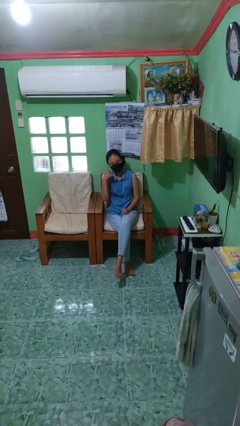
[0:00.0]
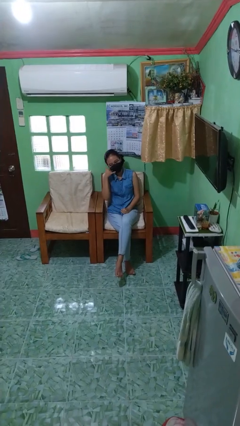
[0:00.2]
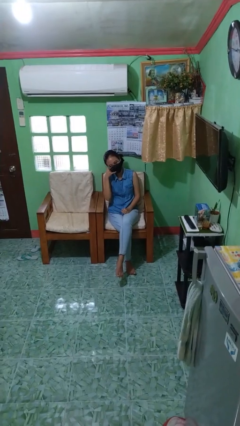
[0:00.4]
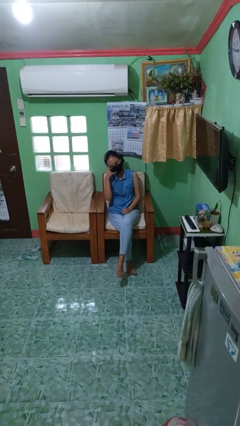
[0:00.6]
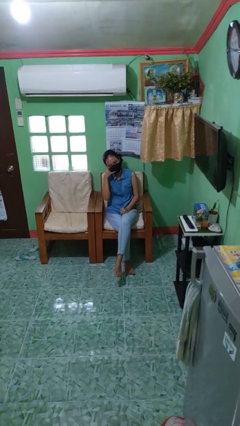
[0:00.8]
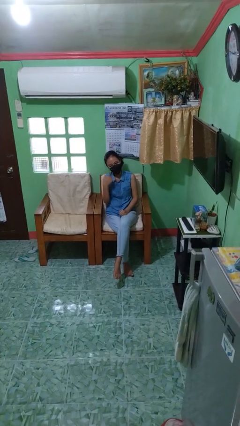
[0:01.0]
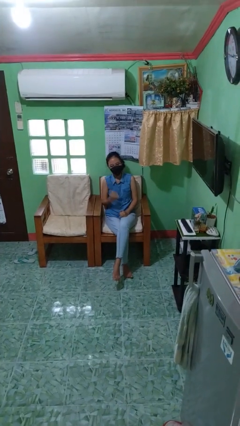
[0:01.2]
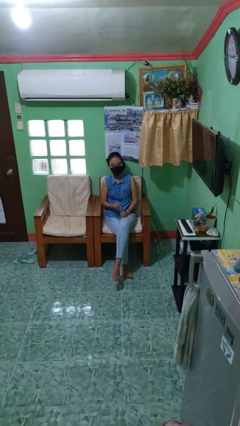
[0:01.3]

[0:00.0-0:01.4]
person gestures call me

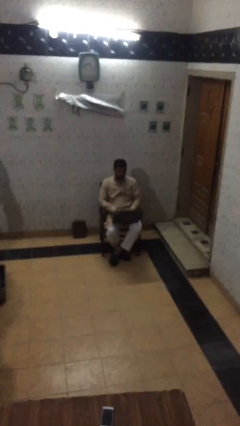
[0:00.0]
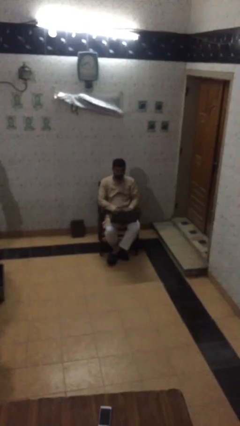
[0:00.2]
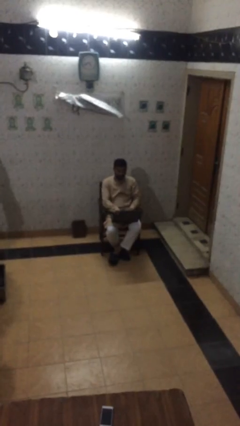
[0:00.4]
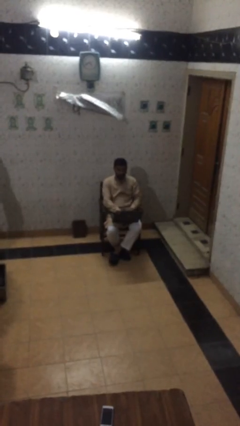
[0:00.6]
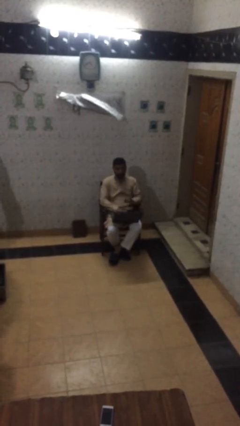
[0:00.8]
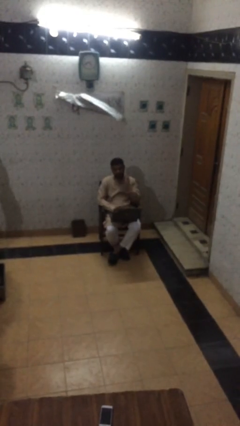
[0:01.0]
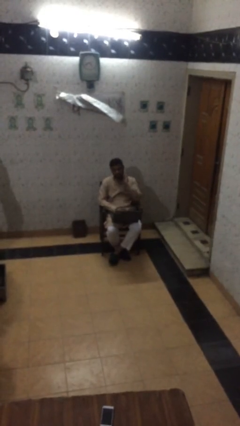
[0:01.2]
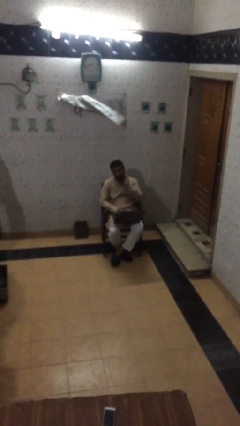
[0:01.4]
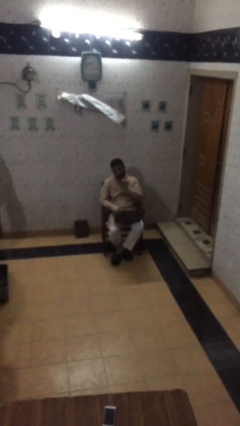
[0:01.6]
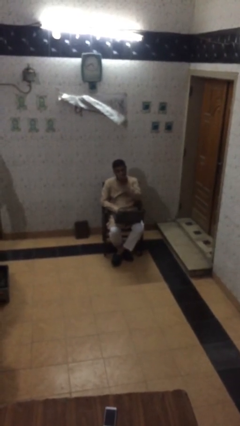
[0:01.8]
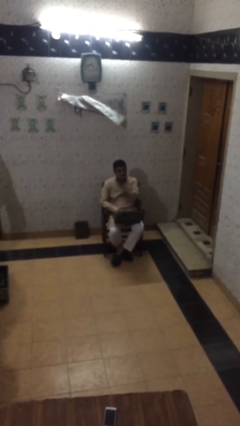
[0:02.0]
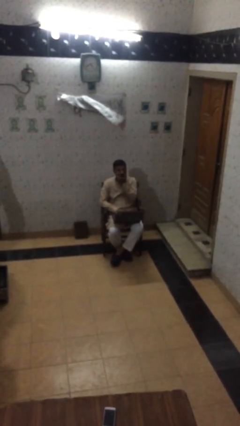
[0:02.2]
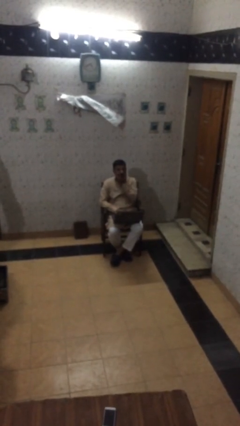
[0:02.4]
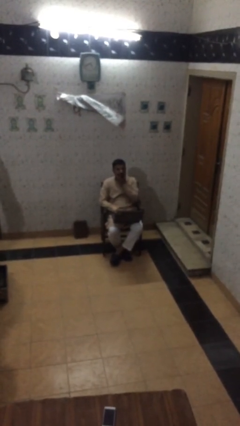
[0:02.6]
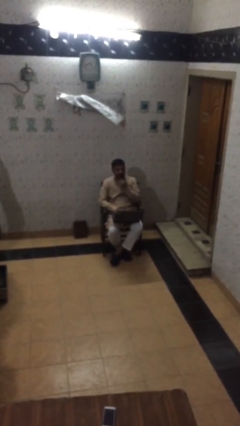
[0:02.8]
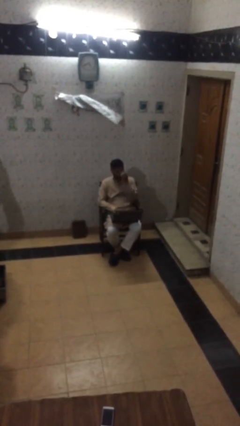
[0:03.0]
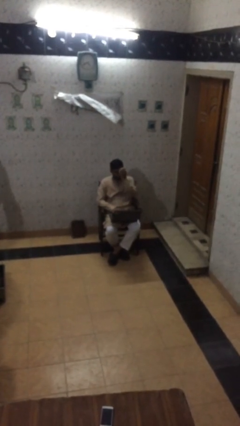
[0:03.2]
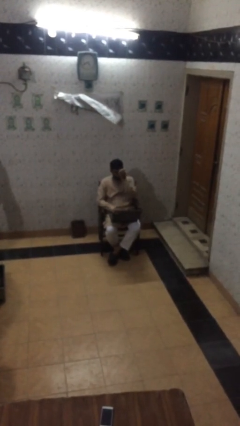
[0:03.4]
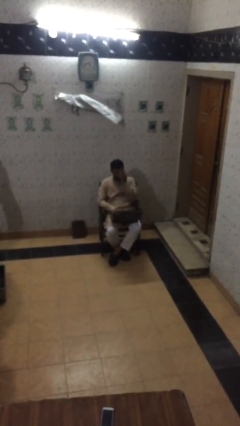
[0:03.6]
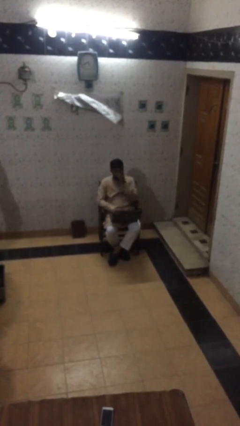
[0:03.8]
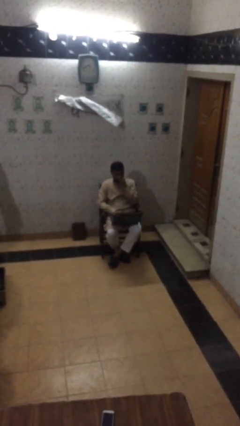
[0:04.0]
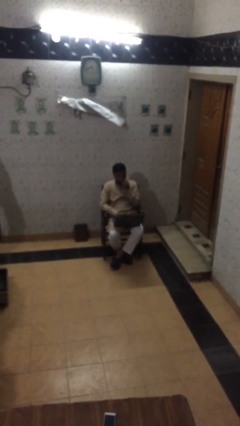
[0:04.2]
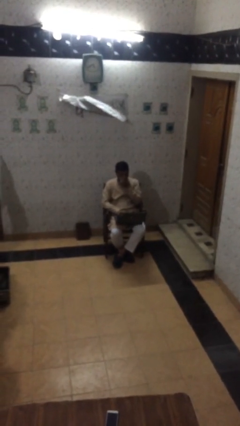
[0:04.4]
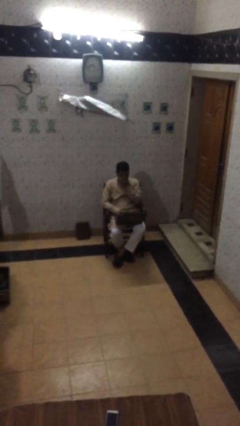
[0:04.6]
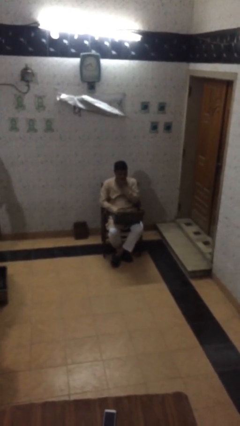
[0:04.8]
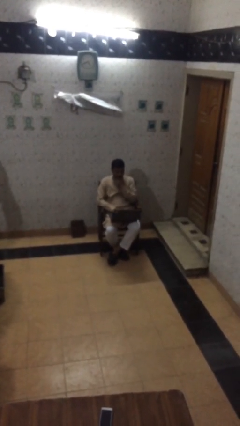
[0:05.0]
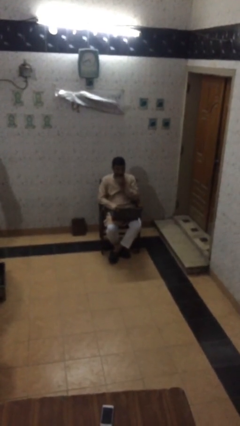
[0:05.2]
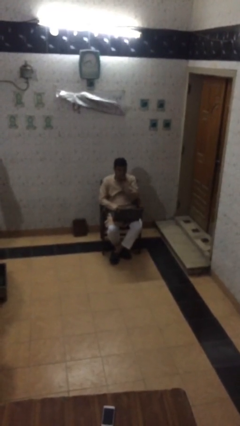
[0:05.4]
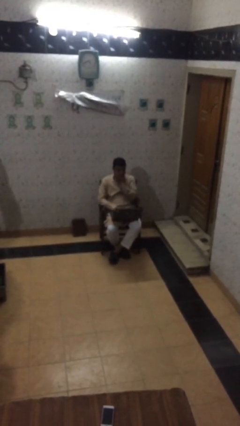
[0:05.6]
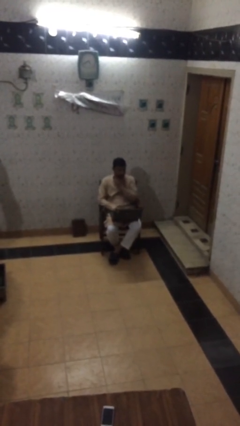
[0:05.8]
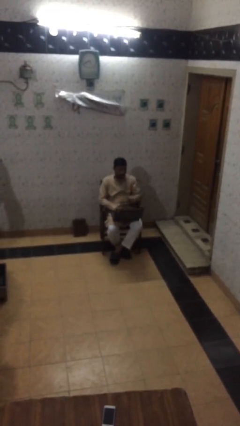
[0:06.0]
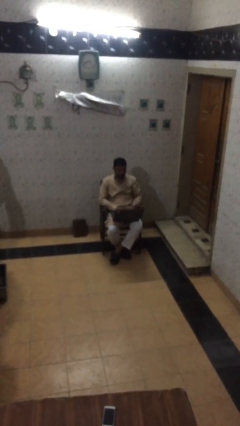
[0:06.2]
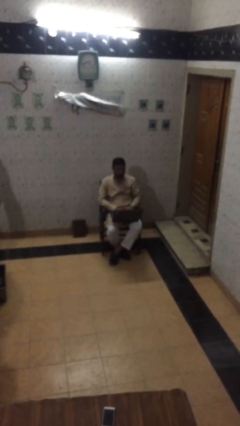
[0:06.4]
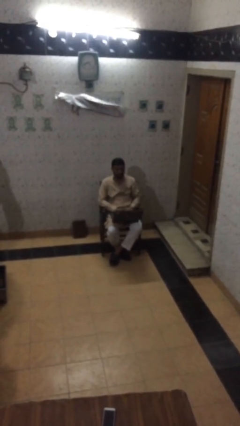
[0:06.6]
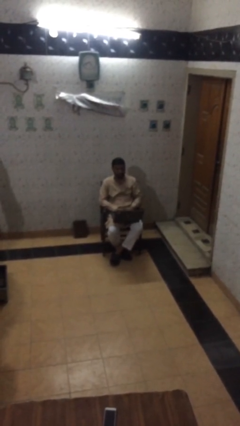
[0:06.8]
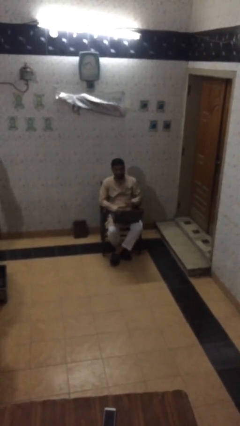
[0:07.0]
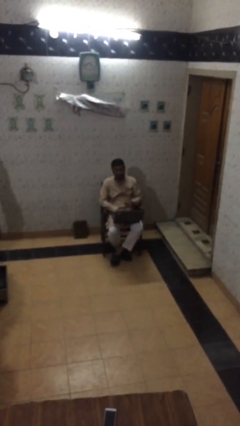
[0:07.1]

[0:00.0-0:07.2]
person interacts with laptop

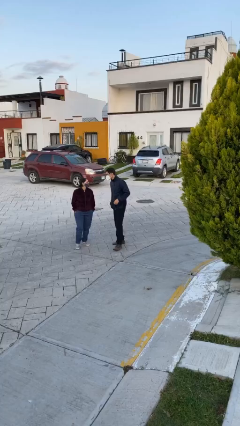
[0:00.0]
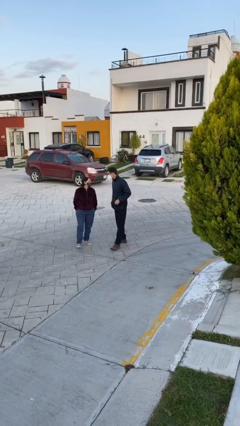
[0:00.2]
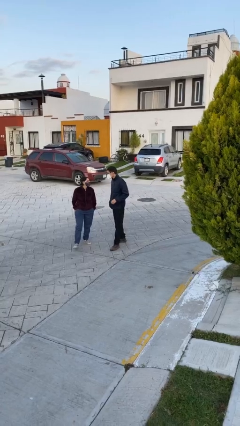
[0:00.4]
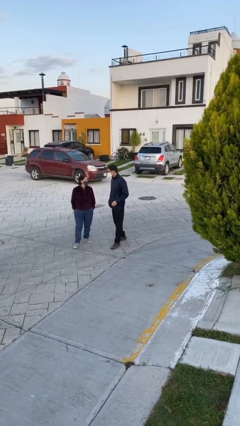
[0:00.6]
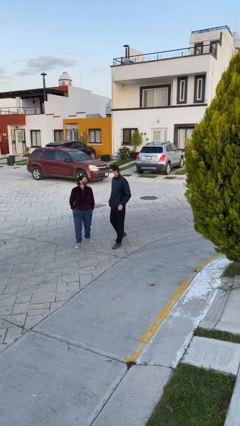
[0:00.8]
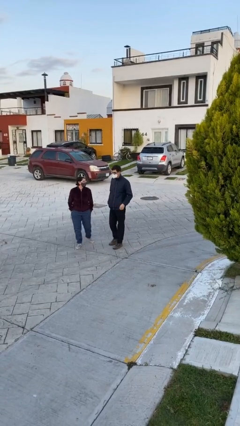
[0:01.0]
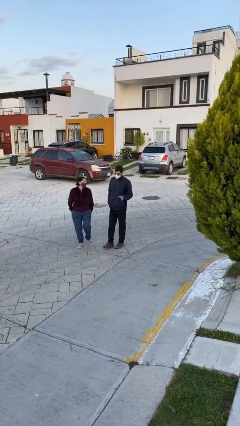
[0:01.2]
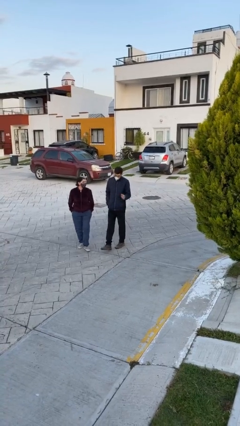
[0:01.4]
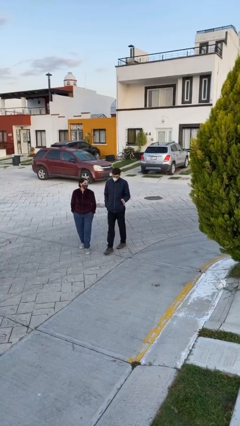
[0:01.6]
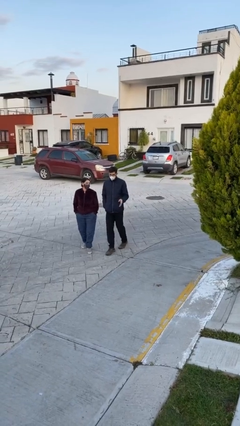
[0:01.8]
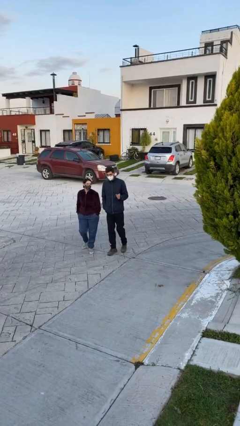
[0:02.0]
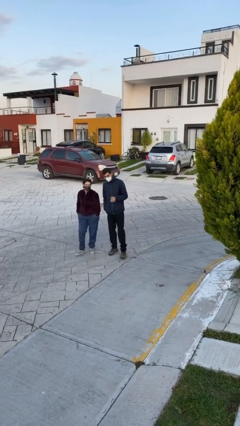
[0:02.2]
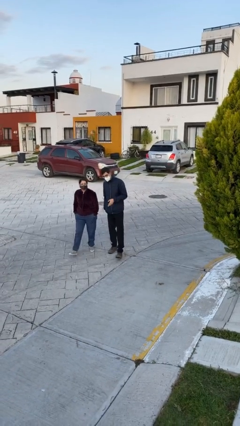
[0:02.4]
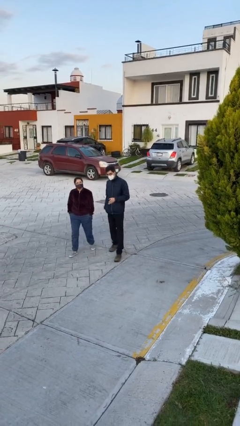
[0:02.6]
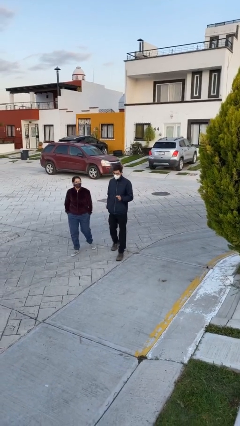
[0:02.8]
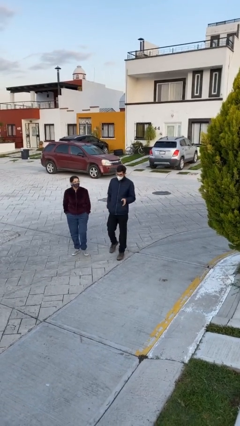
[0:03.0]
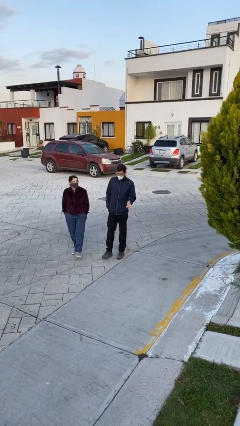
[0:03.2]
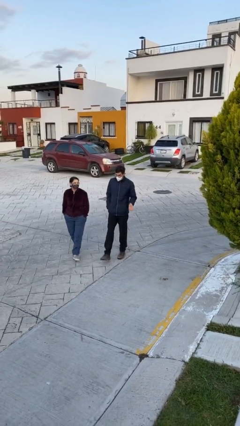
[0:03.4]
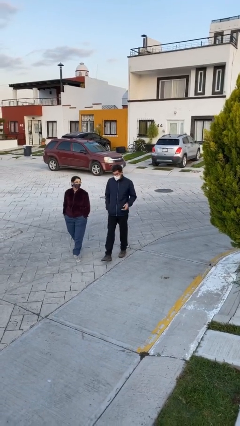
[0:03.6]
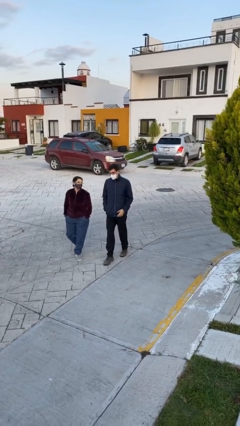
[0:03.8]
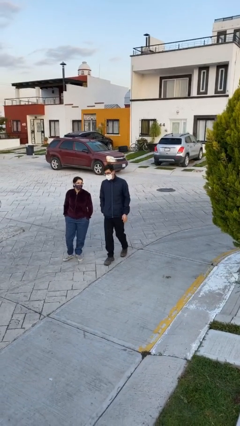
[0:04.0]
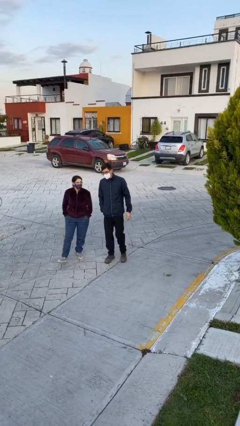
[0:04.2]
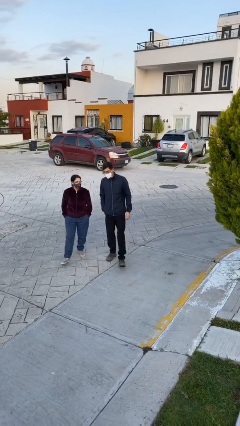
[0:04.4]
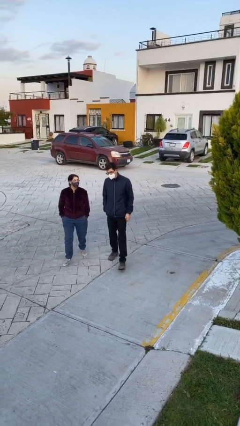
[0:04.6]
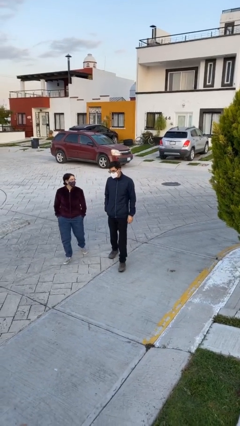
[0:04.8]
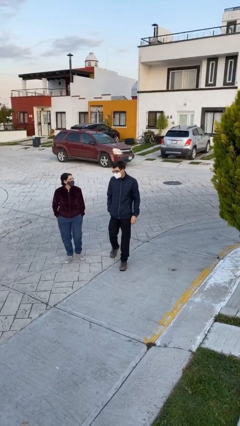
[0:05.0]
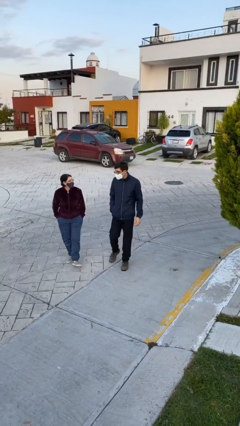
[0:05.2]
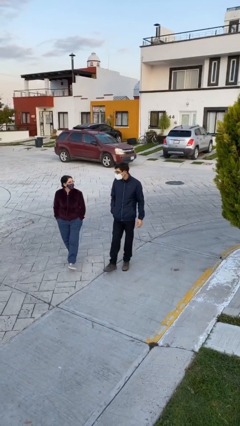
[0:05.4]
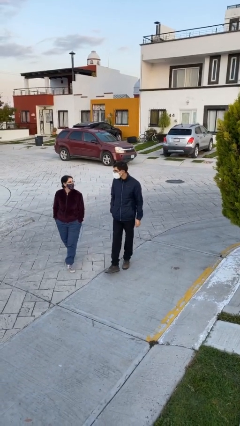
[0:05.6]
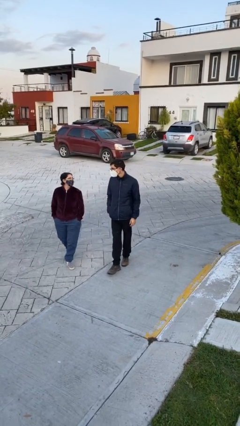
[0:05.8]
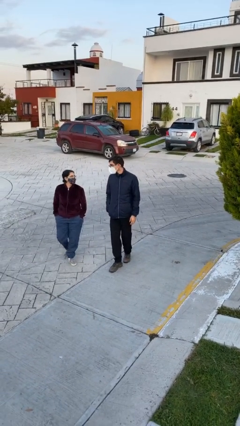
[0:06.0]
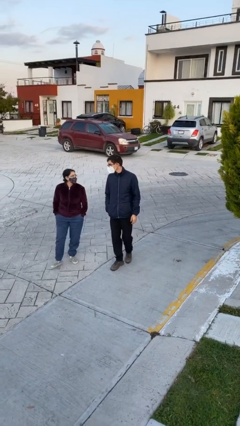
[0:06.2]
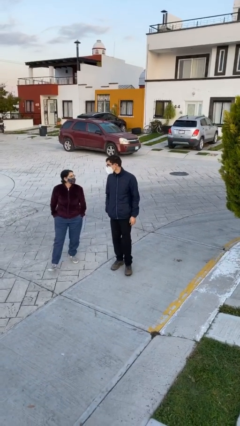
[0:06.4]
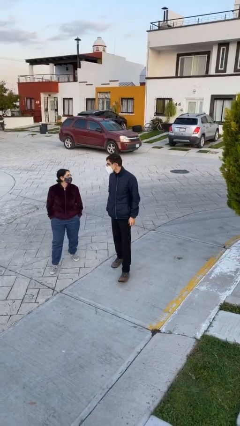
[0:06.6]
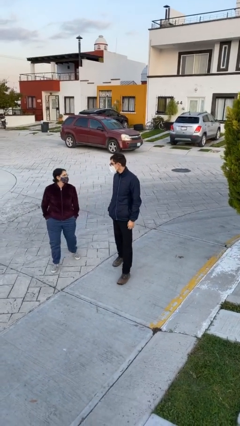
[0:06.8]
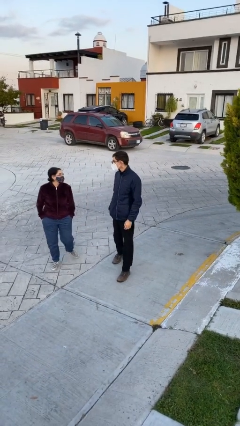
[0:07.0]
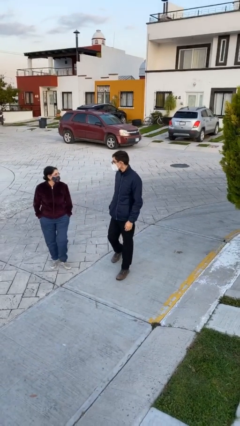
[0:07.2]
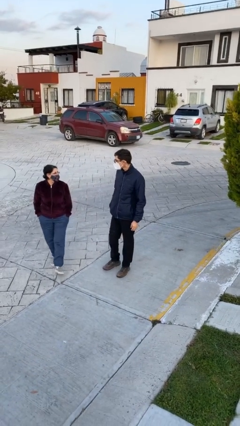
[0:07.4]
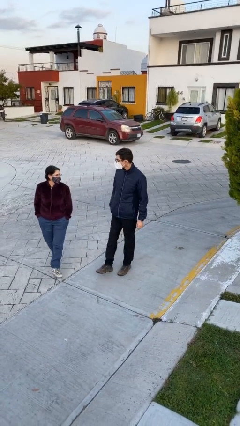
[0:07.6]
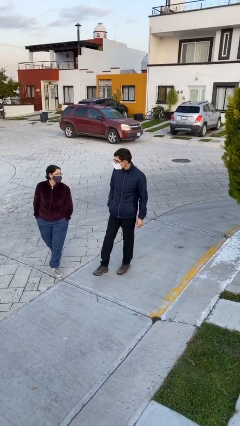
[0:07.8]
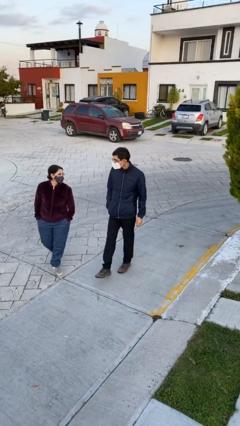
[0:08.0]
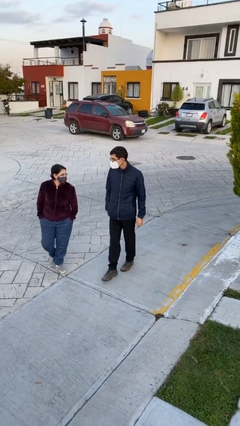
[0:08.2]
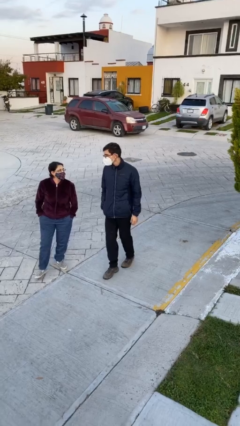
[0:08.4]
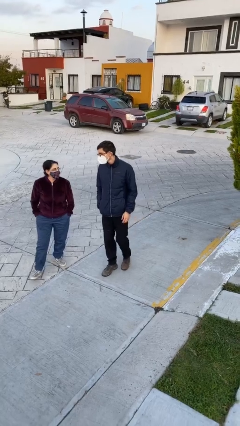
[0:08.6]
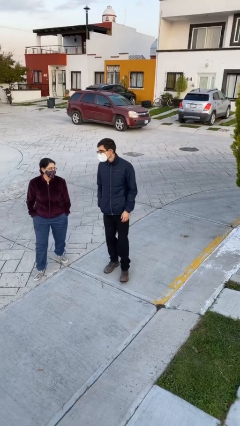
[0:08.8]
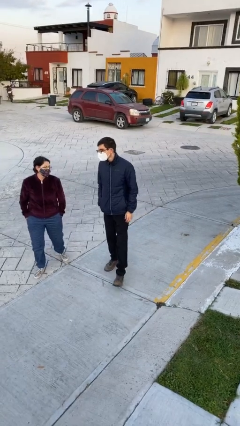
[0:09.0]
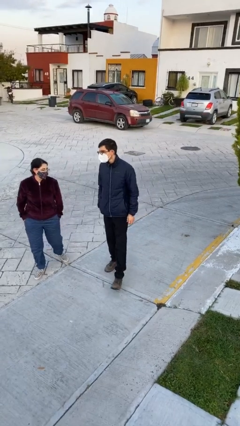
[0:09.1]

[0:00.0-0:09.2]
person talks to person

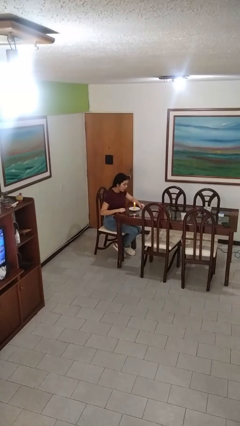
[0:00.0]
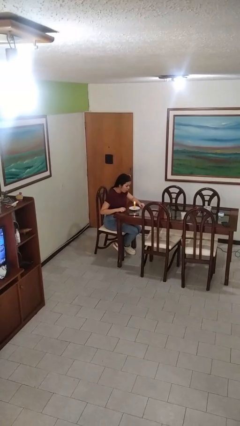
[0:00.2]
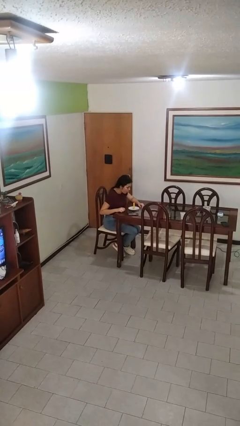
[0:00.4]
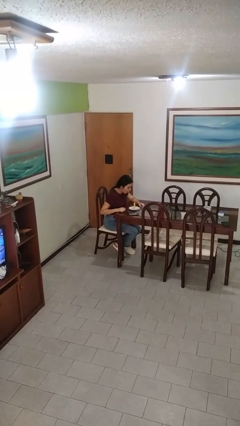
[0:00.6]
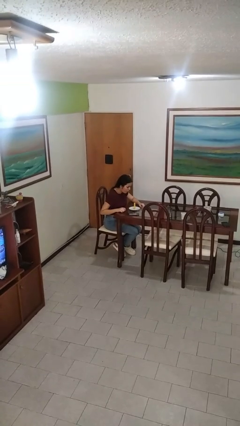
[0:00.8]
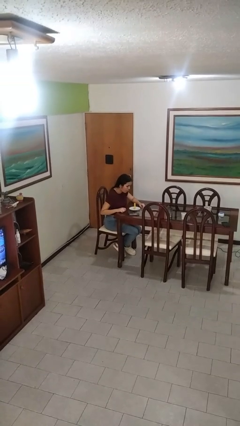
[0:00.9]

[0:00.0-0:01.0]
person extinguishes candle
